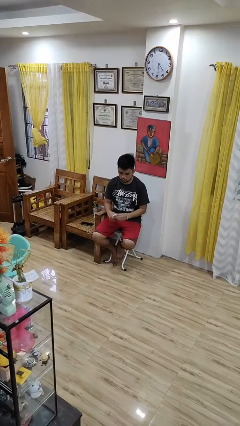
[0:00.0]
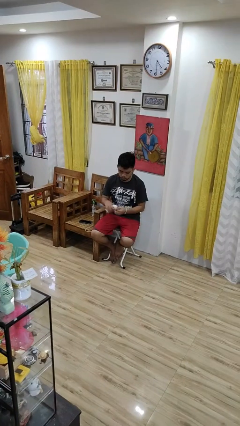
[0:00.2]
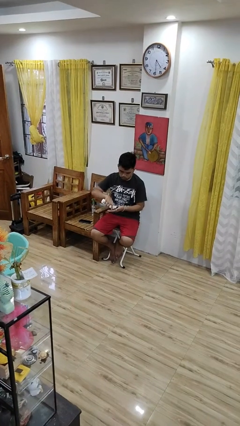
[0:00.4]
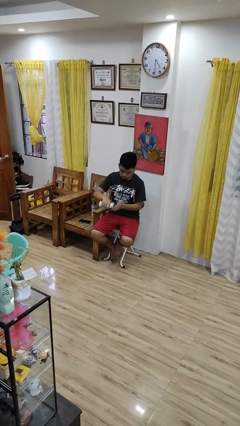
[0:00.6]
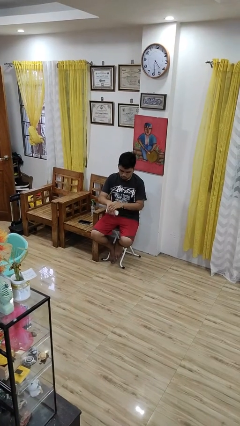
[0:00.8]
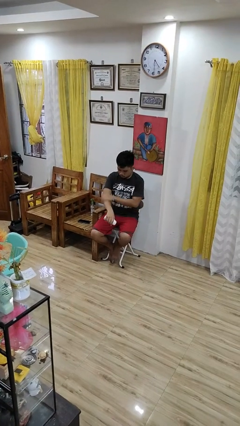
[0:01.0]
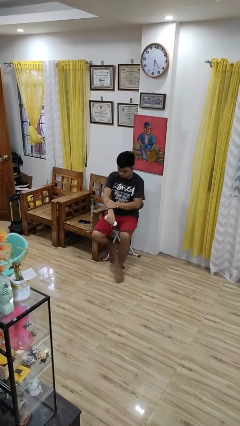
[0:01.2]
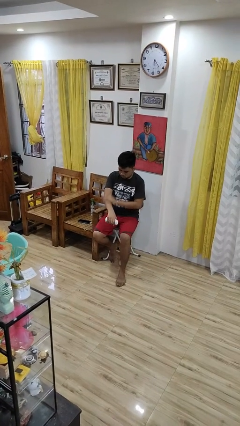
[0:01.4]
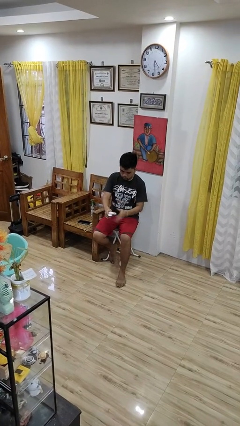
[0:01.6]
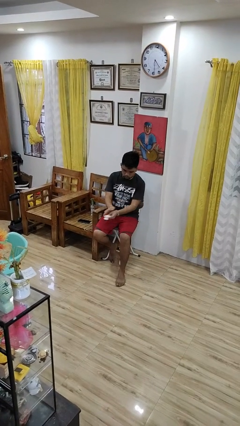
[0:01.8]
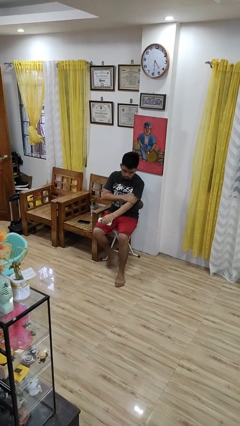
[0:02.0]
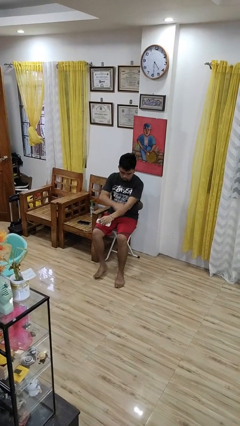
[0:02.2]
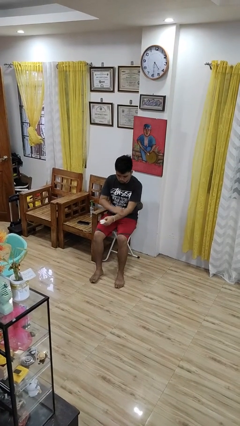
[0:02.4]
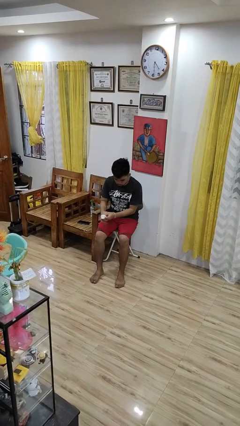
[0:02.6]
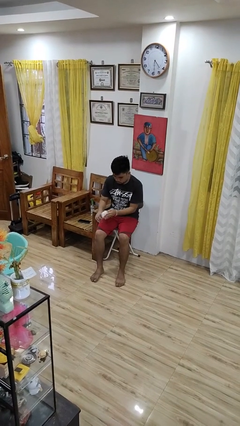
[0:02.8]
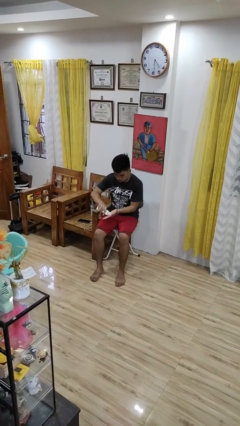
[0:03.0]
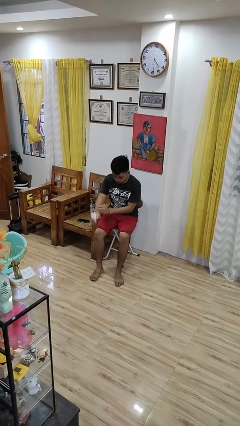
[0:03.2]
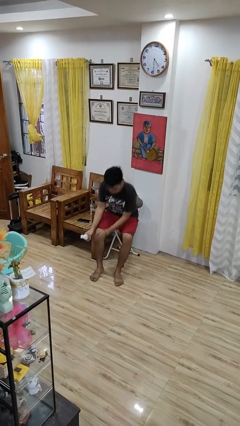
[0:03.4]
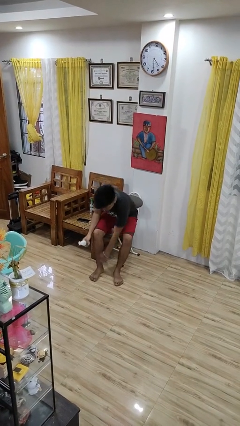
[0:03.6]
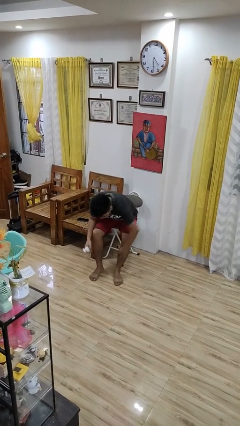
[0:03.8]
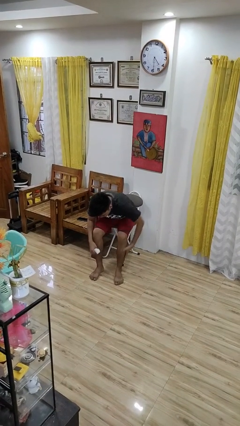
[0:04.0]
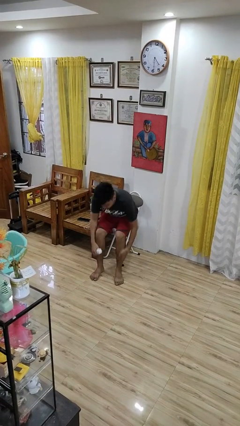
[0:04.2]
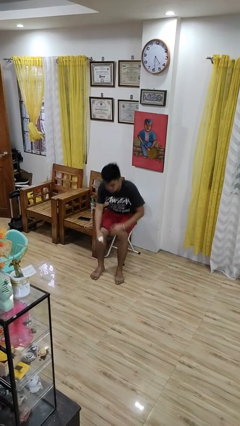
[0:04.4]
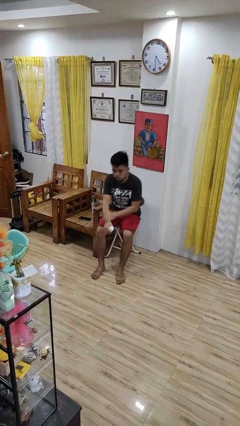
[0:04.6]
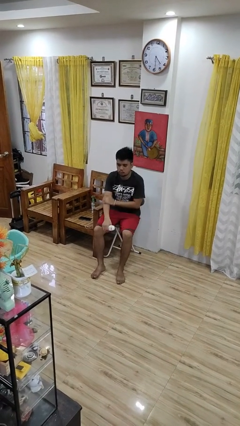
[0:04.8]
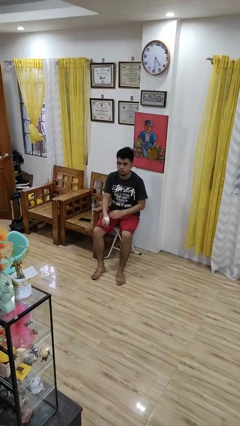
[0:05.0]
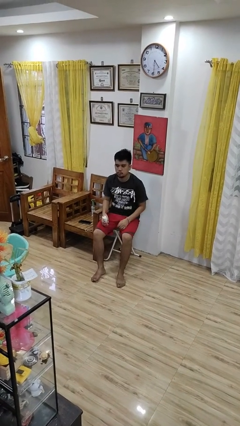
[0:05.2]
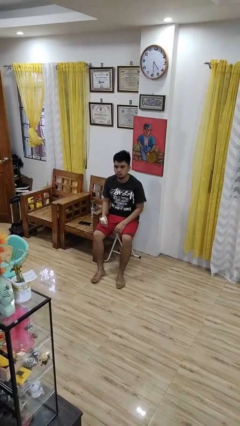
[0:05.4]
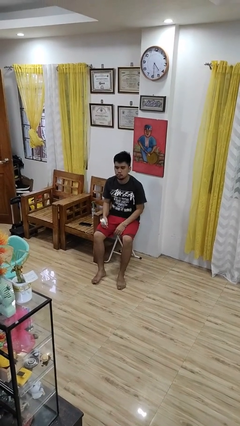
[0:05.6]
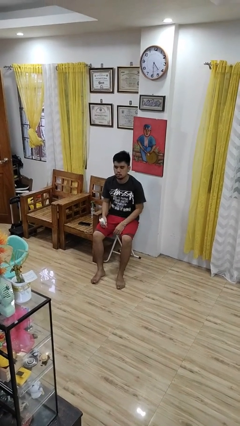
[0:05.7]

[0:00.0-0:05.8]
person applies sunscreen

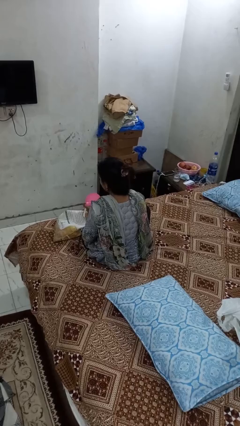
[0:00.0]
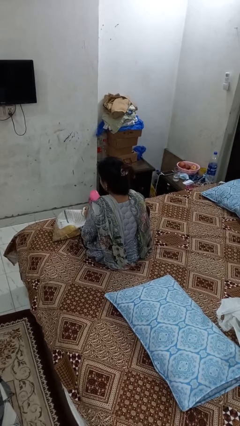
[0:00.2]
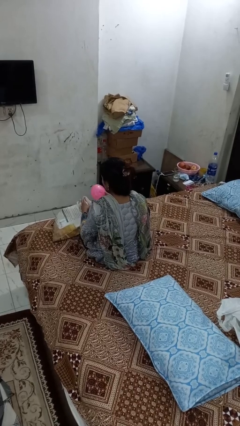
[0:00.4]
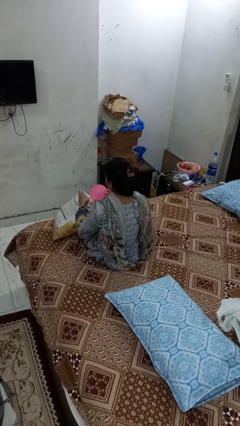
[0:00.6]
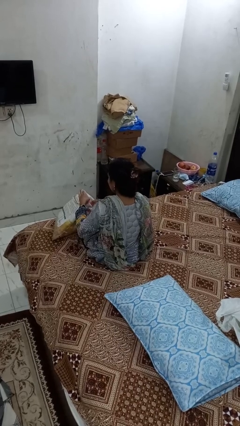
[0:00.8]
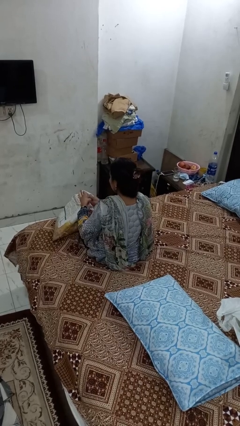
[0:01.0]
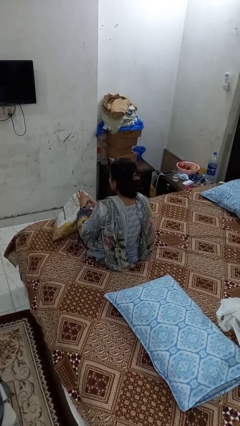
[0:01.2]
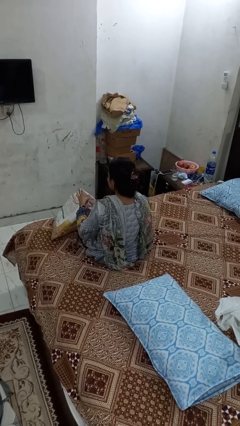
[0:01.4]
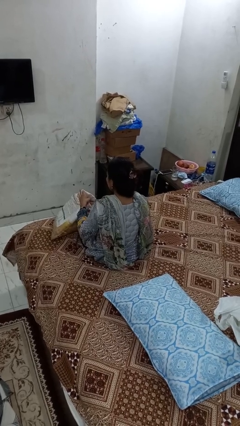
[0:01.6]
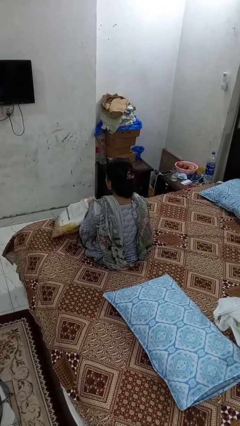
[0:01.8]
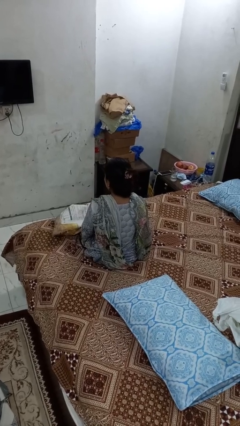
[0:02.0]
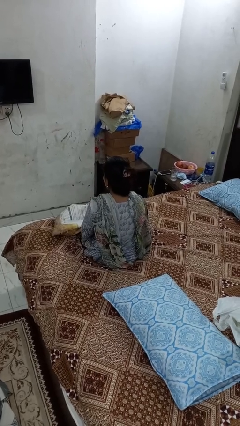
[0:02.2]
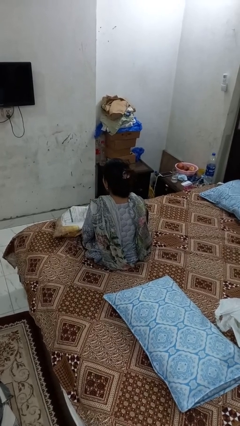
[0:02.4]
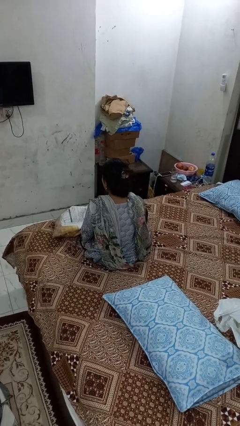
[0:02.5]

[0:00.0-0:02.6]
person puts object into bag

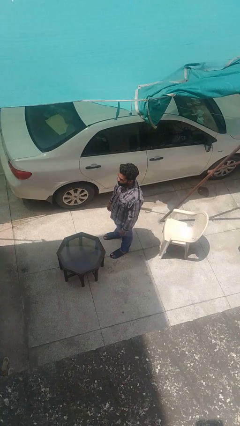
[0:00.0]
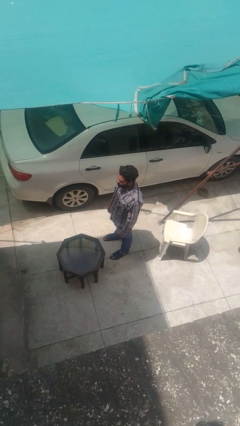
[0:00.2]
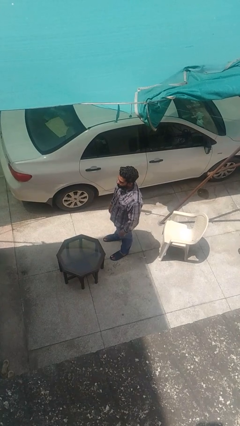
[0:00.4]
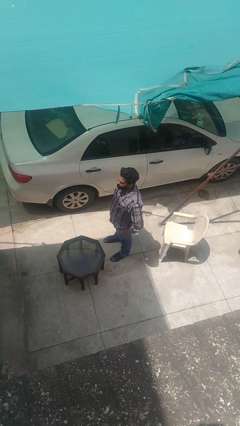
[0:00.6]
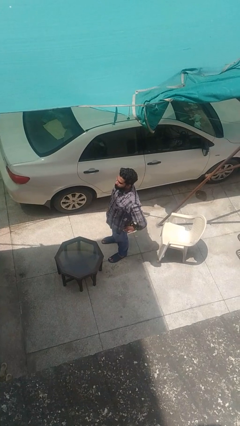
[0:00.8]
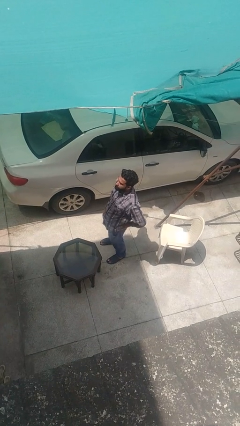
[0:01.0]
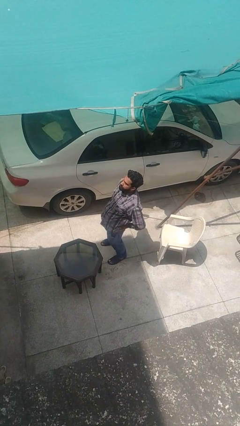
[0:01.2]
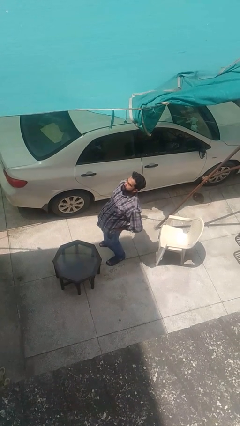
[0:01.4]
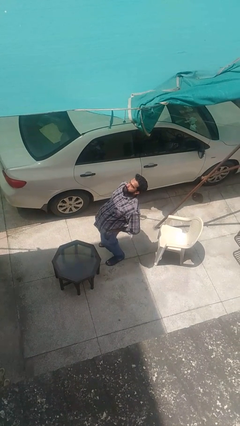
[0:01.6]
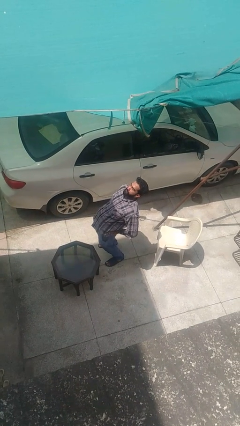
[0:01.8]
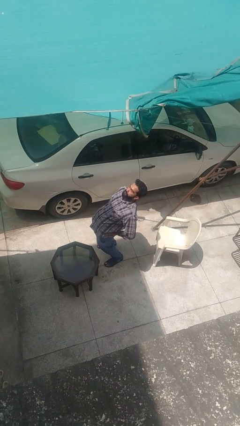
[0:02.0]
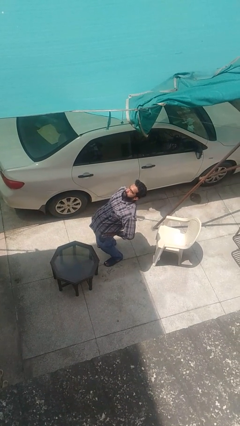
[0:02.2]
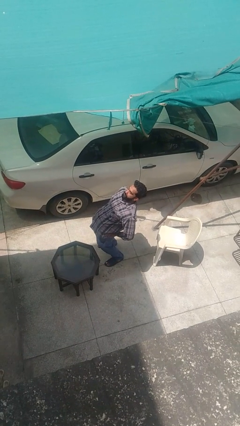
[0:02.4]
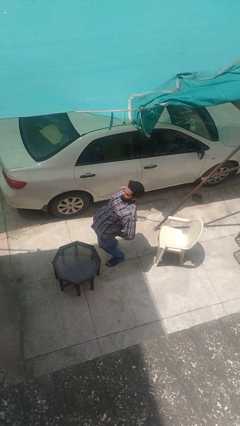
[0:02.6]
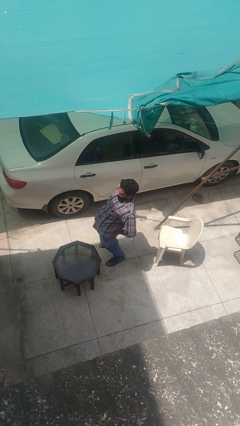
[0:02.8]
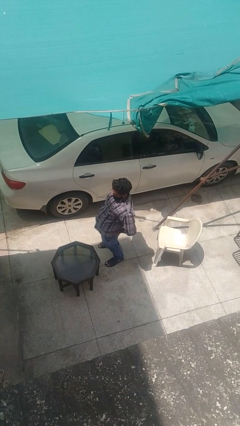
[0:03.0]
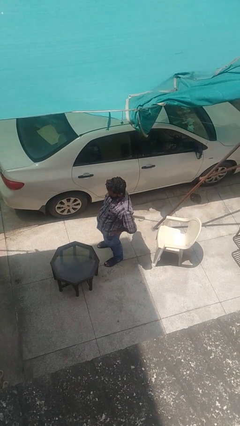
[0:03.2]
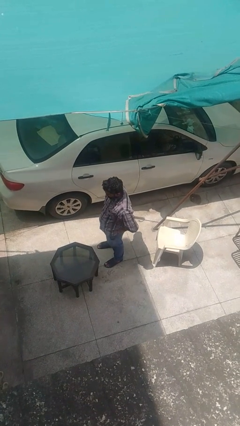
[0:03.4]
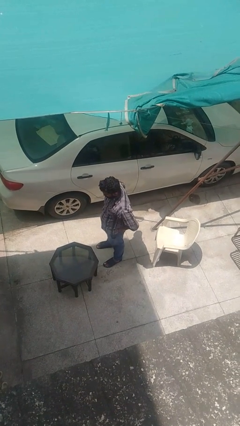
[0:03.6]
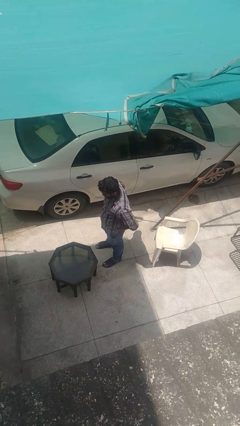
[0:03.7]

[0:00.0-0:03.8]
person stretches back

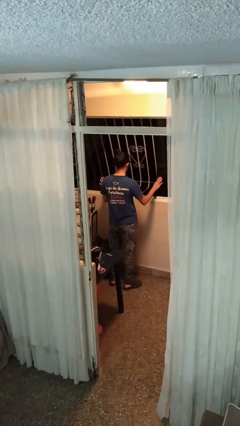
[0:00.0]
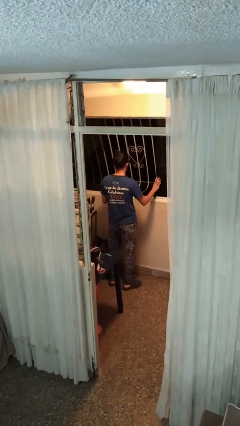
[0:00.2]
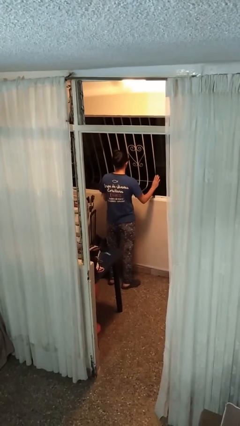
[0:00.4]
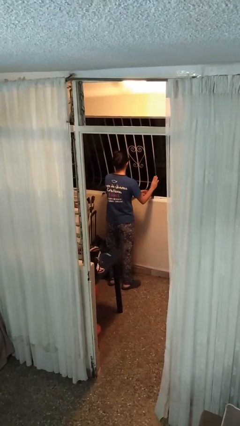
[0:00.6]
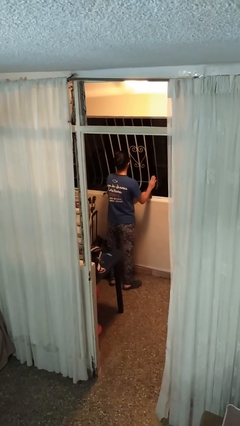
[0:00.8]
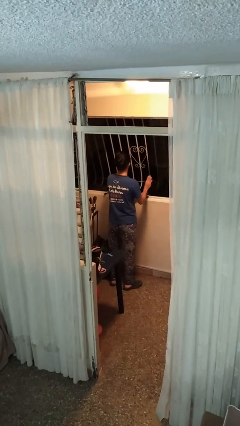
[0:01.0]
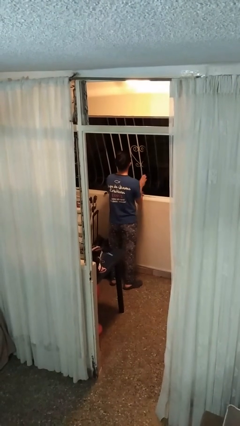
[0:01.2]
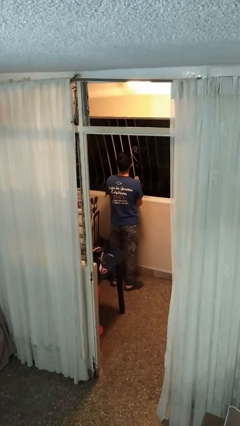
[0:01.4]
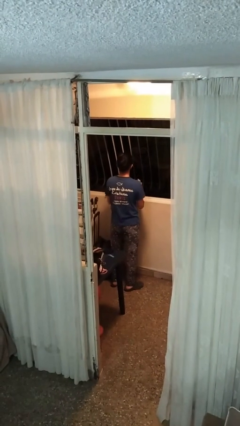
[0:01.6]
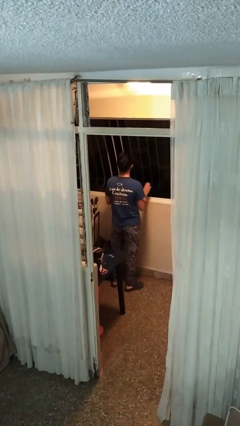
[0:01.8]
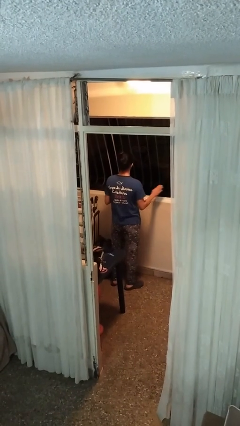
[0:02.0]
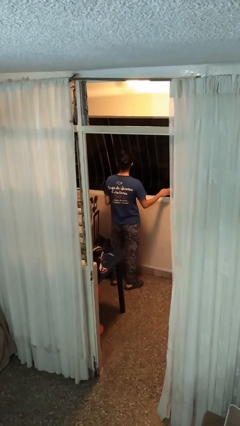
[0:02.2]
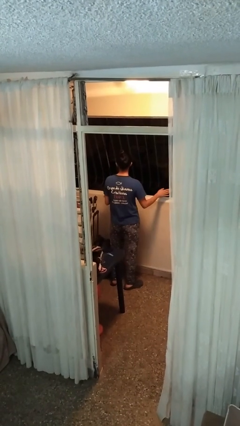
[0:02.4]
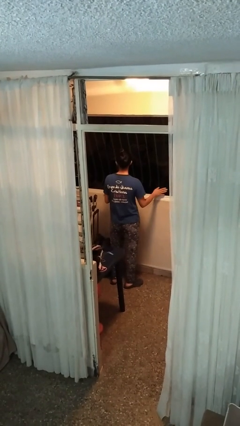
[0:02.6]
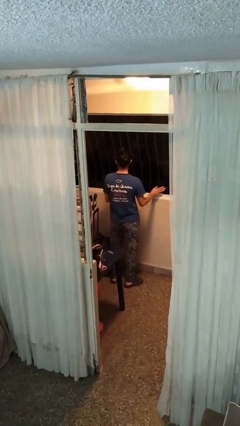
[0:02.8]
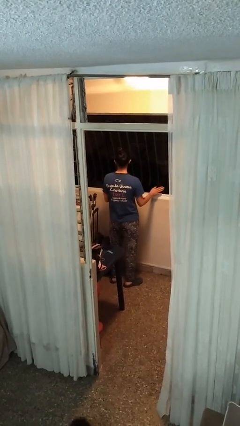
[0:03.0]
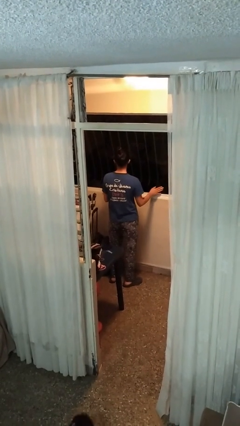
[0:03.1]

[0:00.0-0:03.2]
person closes home window

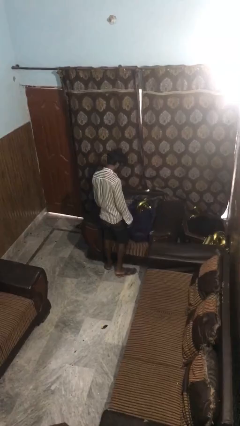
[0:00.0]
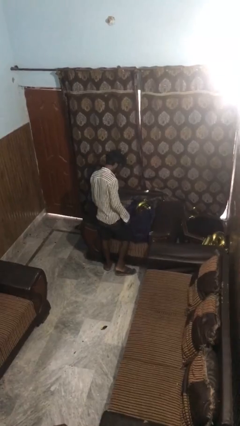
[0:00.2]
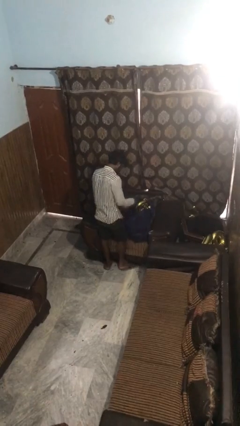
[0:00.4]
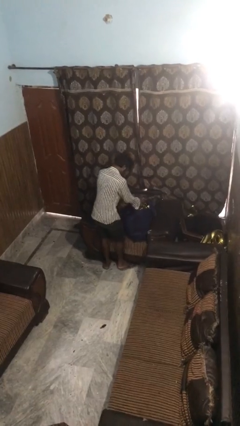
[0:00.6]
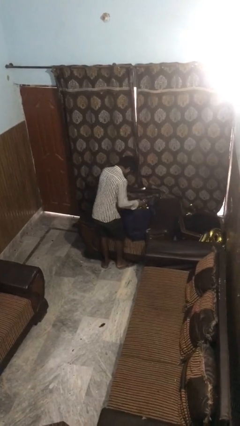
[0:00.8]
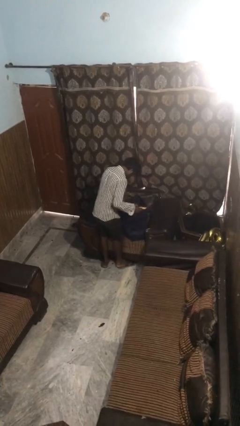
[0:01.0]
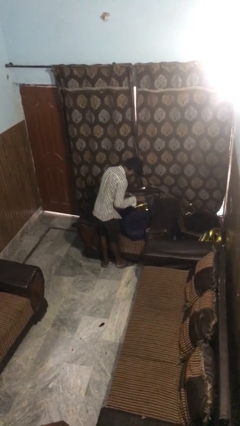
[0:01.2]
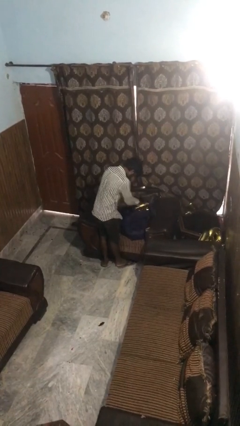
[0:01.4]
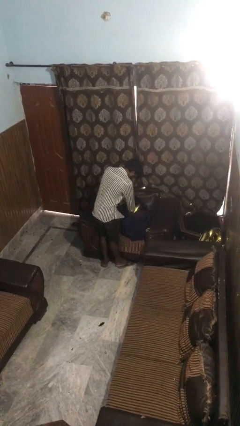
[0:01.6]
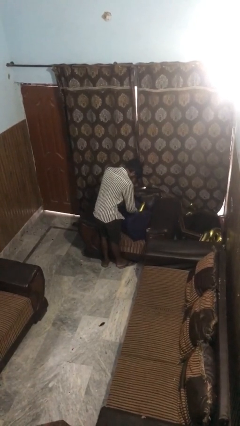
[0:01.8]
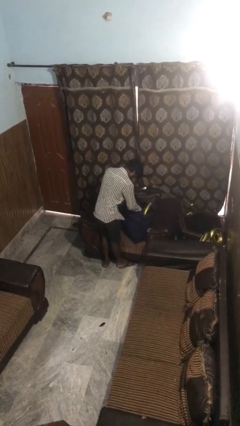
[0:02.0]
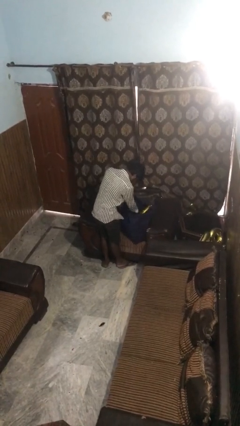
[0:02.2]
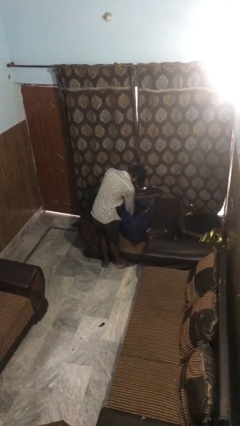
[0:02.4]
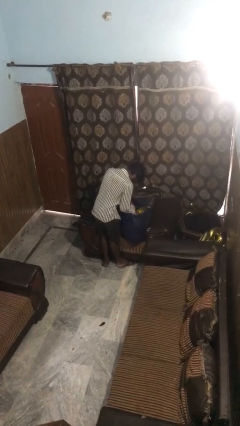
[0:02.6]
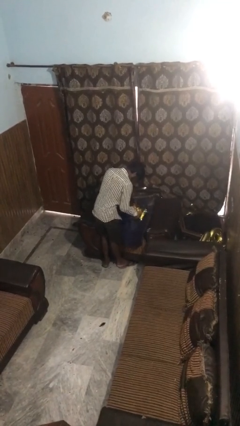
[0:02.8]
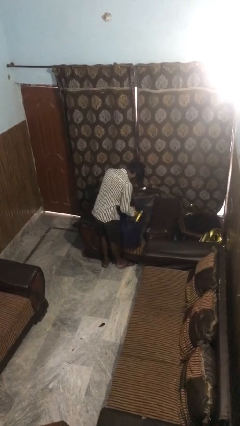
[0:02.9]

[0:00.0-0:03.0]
person searches in bag
